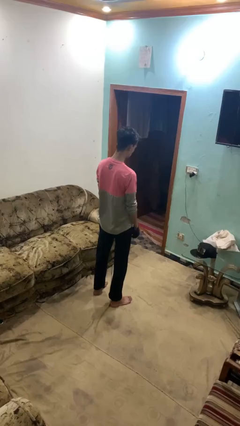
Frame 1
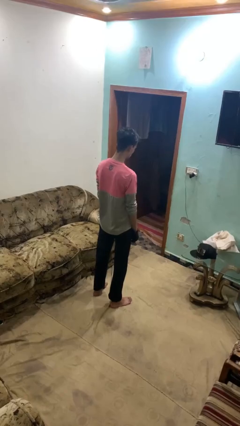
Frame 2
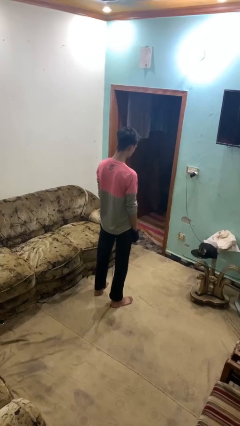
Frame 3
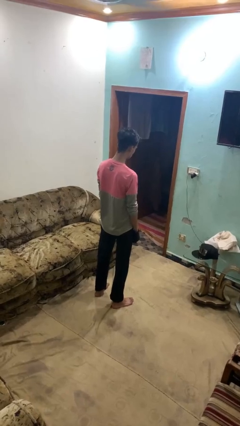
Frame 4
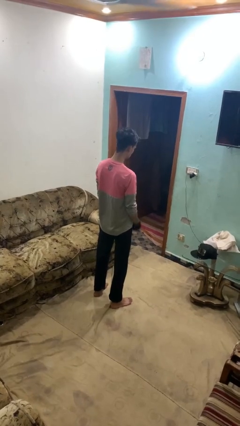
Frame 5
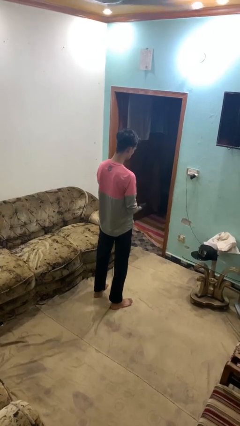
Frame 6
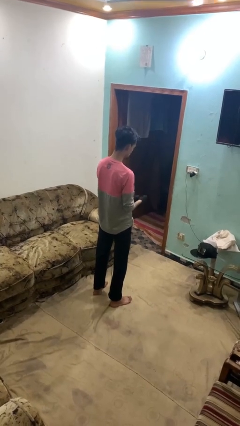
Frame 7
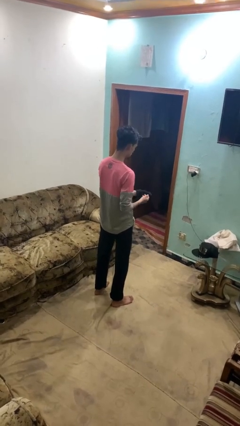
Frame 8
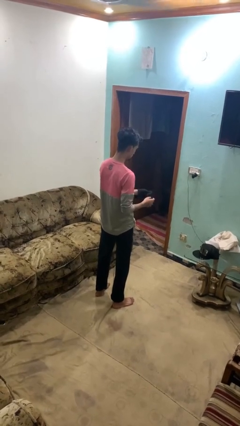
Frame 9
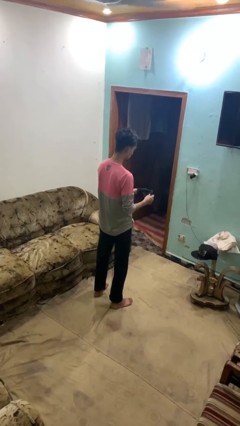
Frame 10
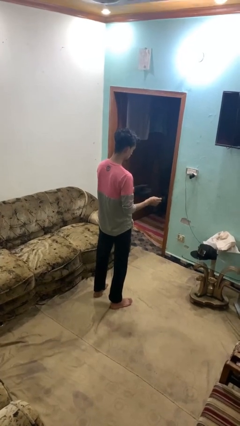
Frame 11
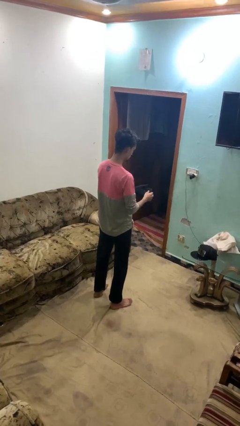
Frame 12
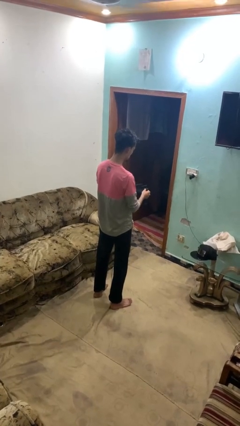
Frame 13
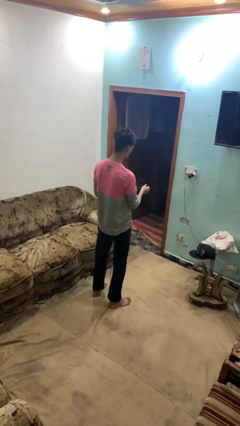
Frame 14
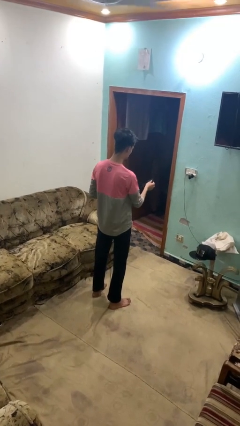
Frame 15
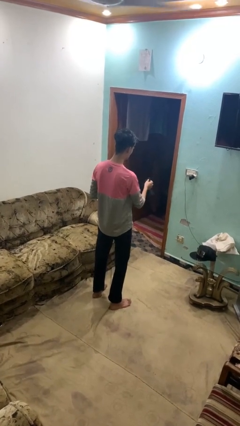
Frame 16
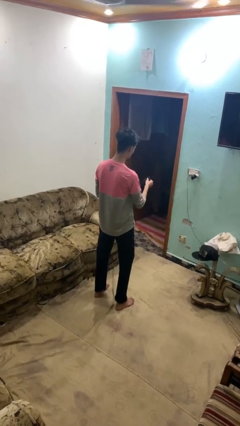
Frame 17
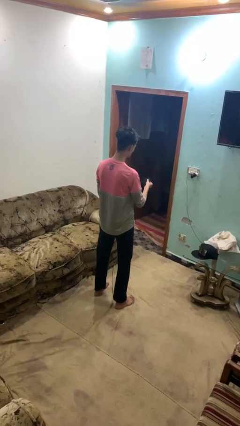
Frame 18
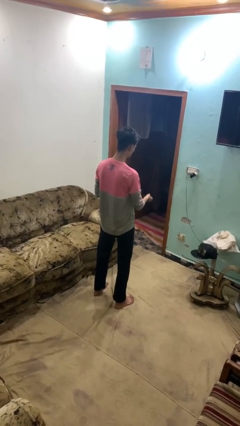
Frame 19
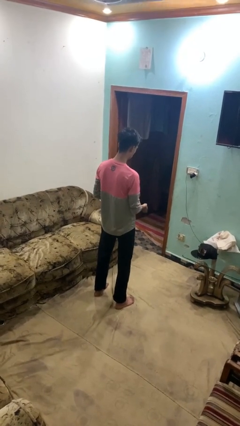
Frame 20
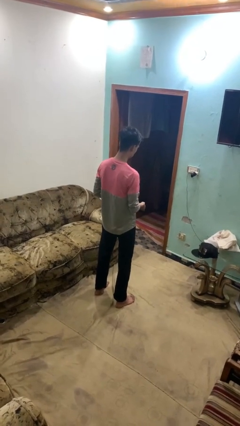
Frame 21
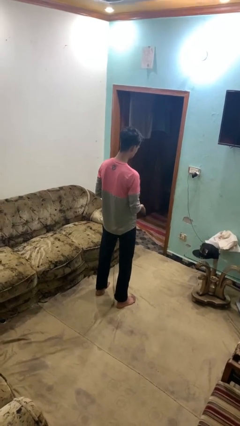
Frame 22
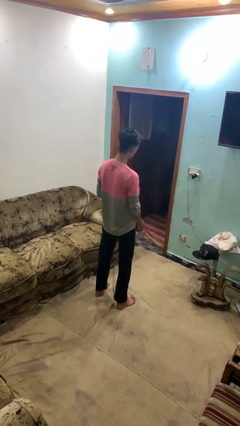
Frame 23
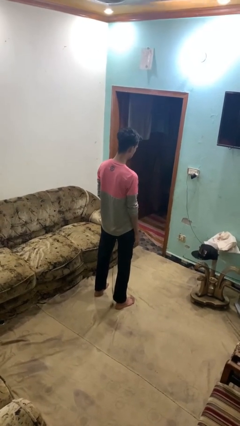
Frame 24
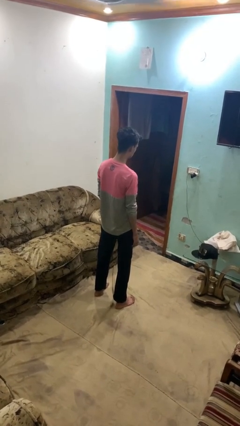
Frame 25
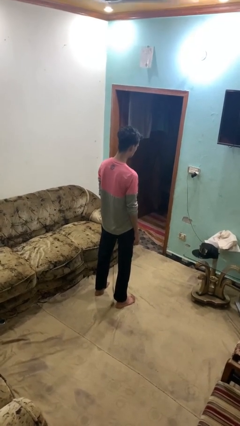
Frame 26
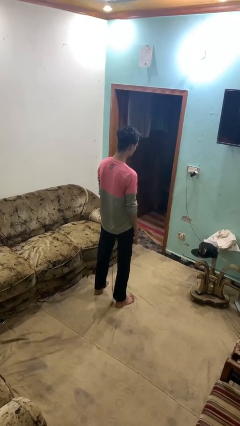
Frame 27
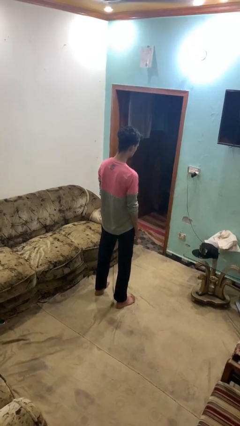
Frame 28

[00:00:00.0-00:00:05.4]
person takes off gloves

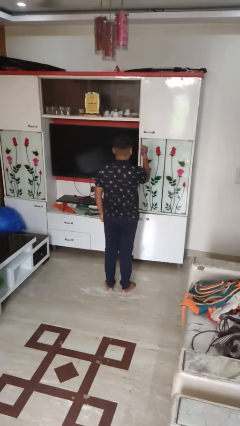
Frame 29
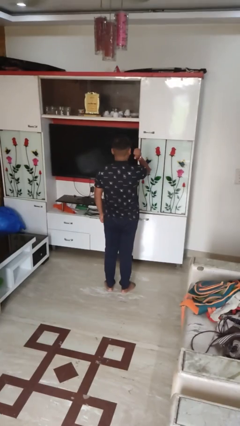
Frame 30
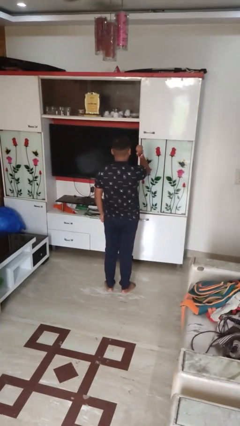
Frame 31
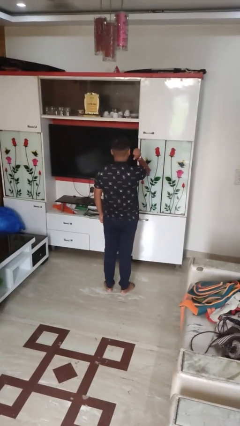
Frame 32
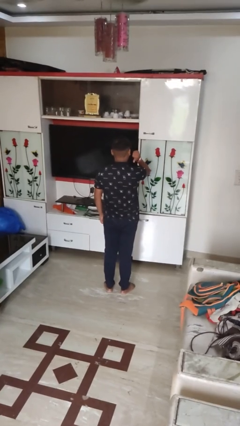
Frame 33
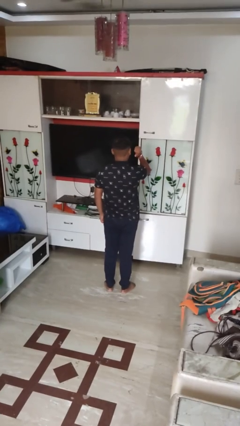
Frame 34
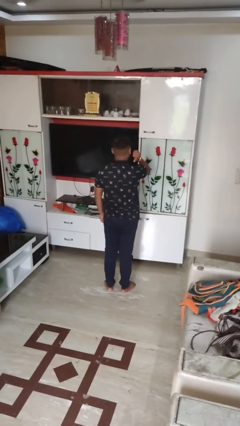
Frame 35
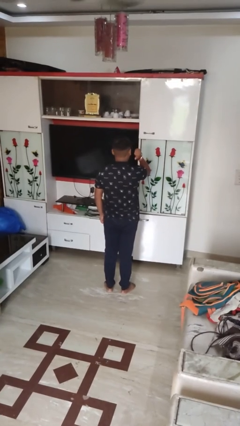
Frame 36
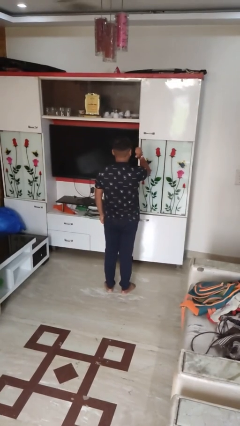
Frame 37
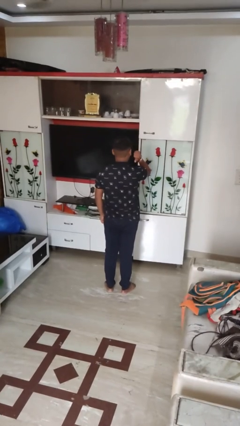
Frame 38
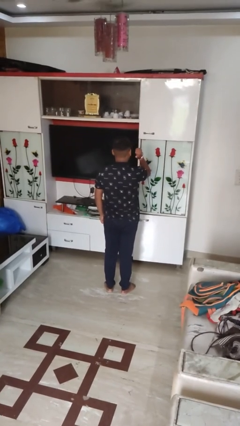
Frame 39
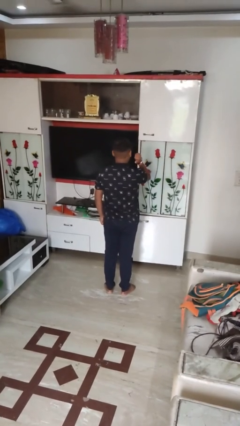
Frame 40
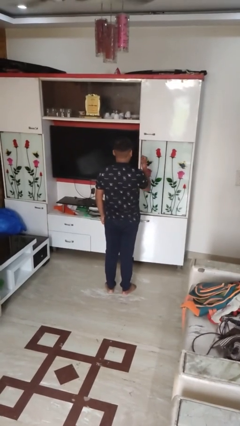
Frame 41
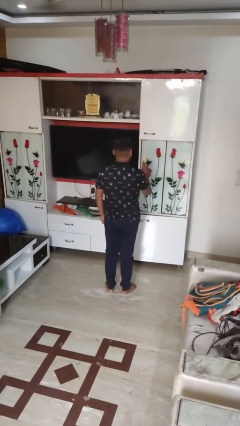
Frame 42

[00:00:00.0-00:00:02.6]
person gestures behind me

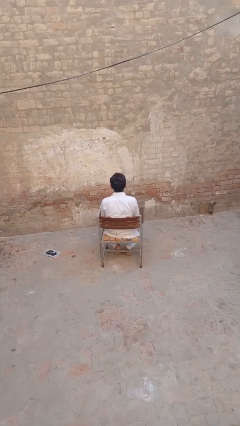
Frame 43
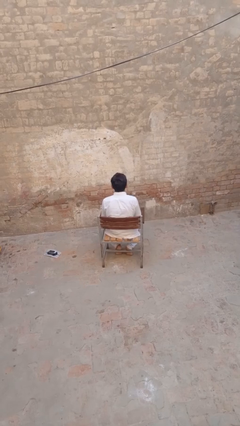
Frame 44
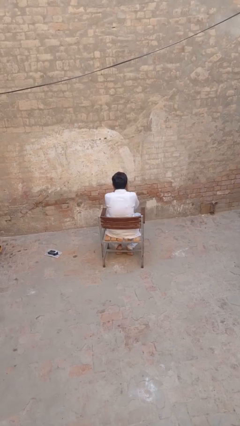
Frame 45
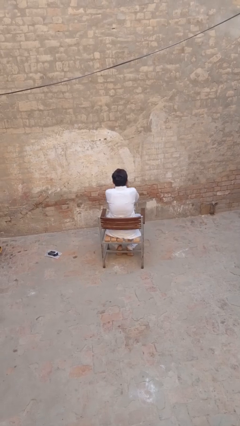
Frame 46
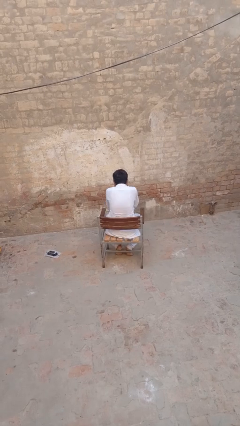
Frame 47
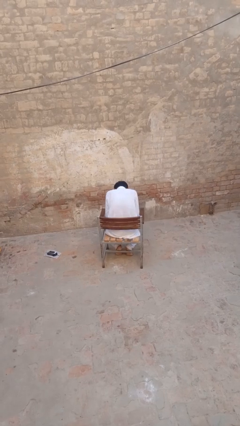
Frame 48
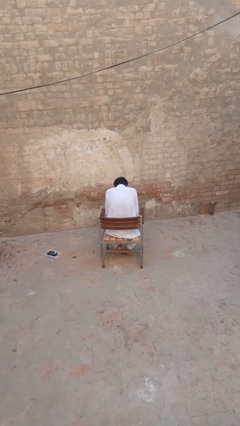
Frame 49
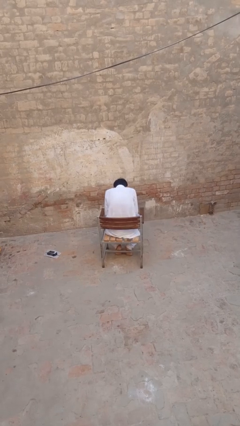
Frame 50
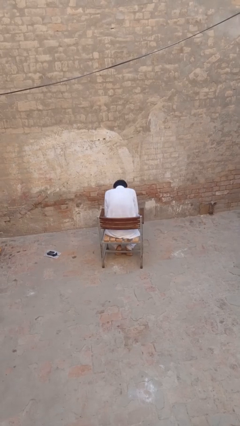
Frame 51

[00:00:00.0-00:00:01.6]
person sneezes into hand

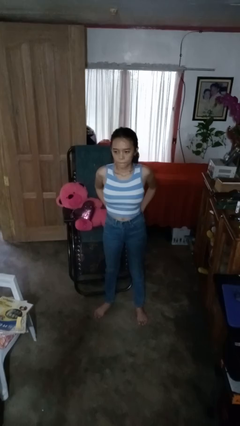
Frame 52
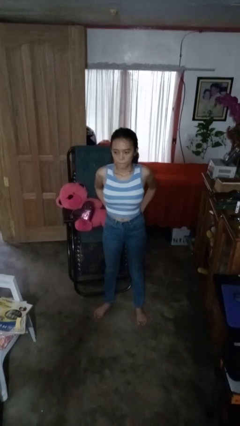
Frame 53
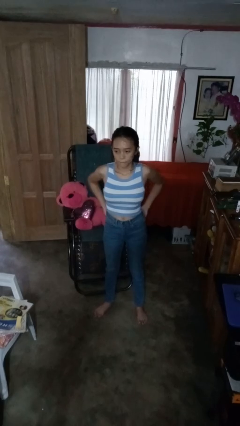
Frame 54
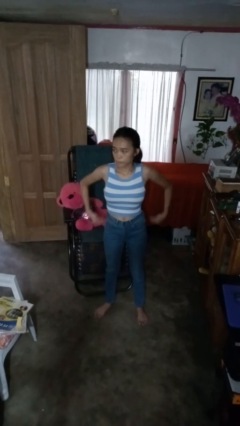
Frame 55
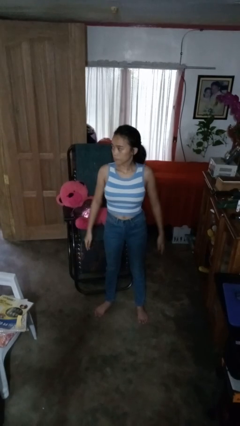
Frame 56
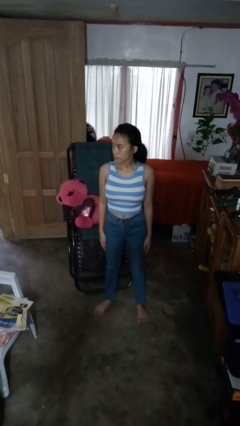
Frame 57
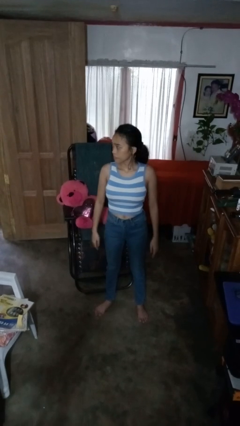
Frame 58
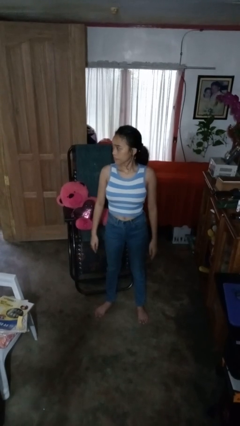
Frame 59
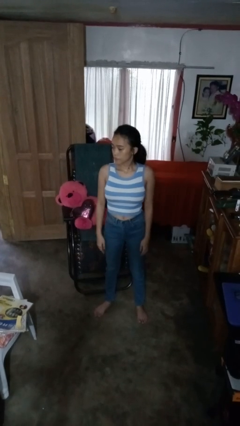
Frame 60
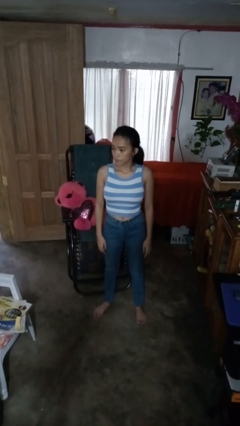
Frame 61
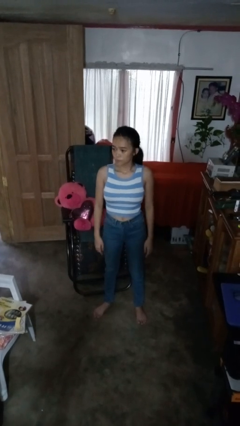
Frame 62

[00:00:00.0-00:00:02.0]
person puts hands in back pockets

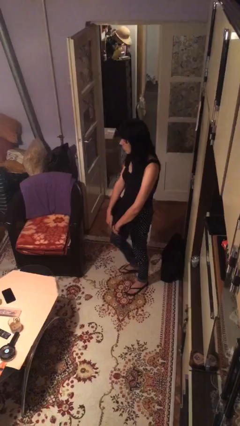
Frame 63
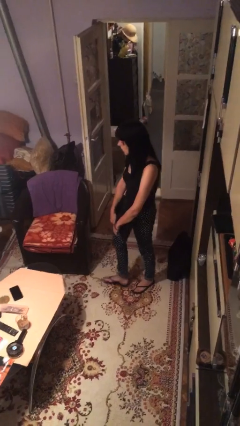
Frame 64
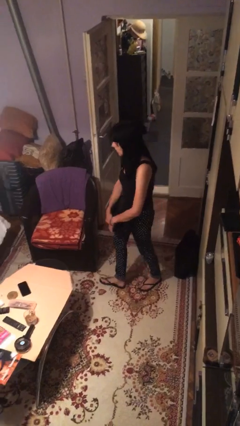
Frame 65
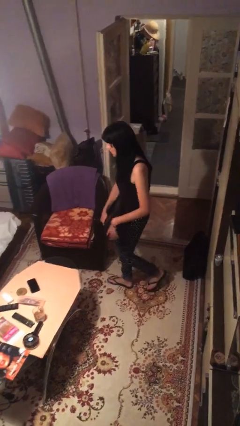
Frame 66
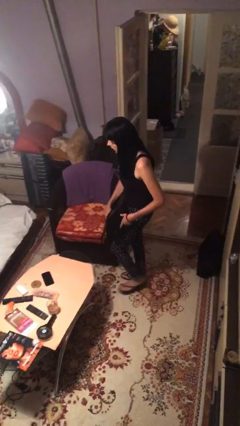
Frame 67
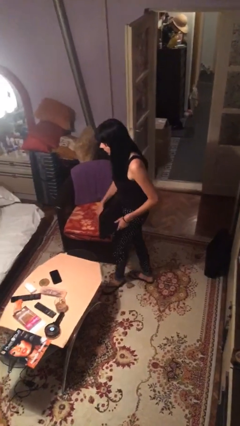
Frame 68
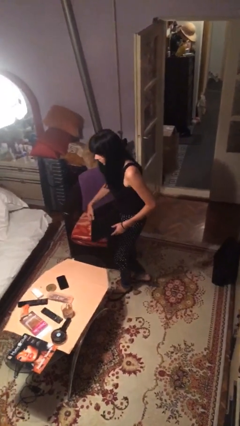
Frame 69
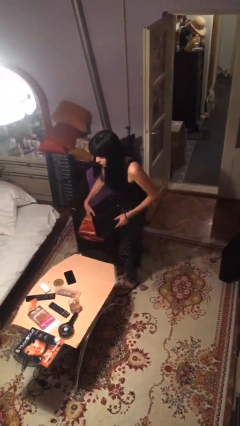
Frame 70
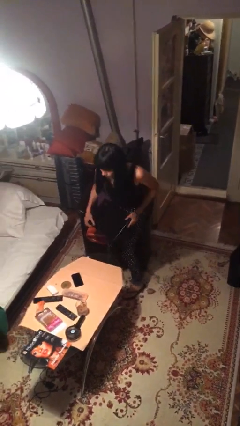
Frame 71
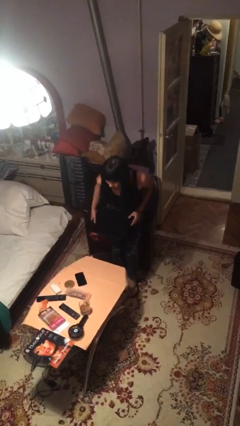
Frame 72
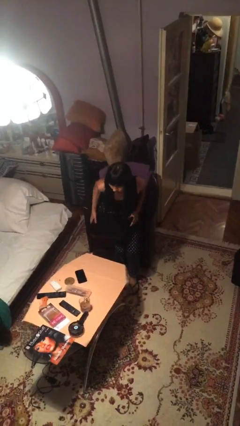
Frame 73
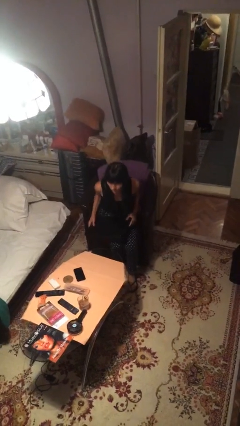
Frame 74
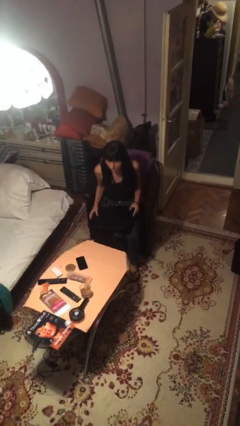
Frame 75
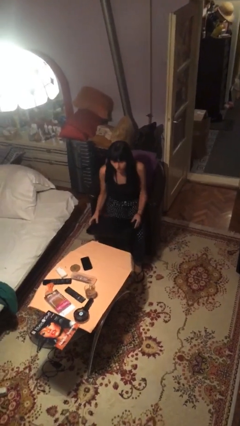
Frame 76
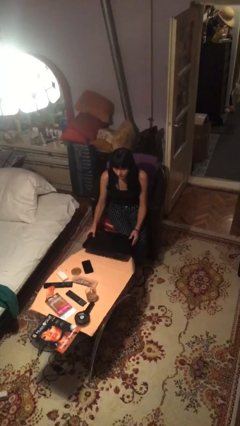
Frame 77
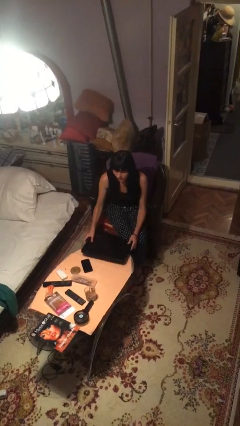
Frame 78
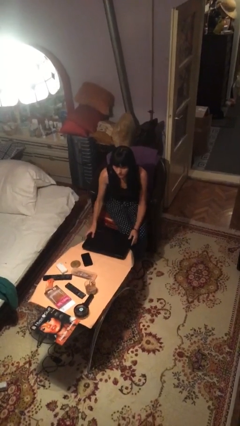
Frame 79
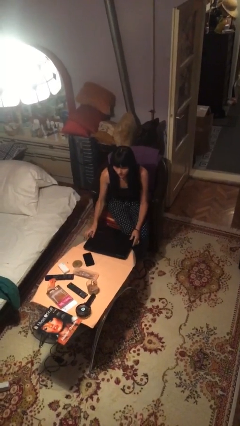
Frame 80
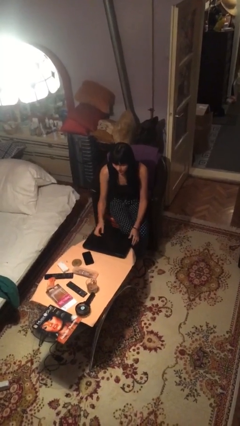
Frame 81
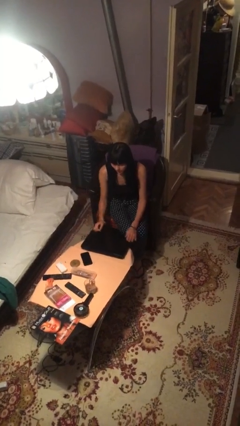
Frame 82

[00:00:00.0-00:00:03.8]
person sits down

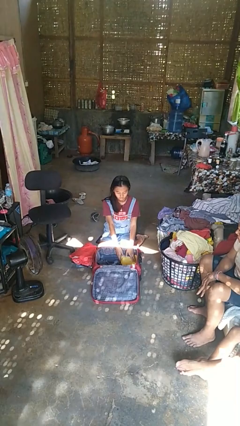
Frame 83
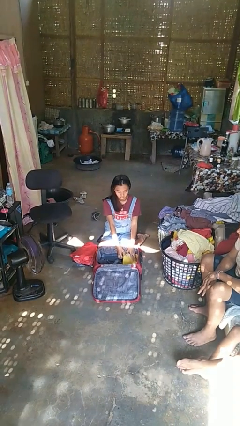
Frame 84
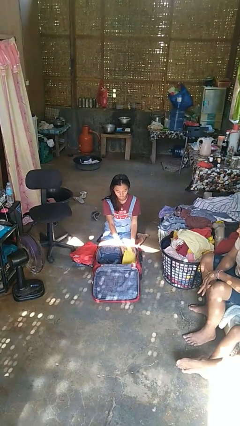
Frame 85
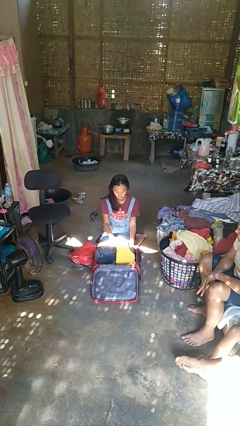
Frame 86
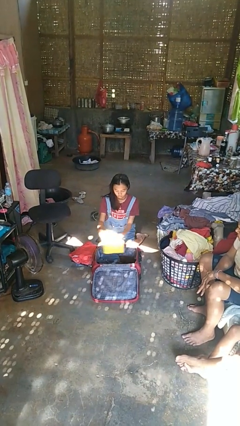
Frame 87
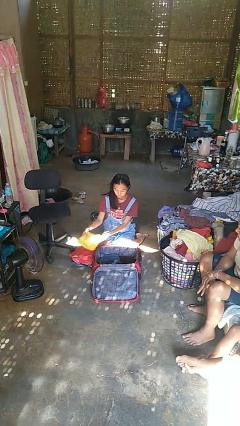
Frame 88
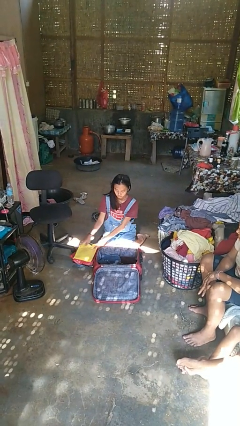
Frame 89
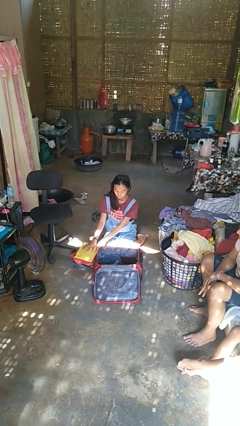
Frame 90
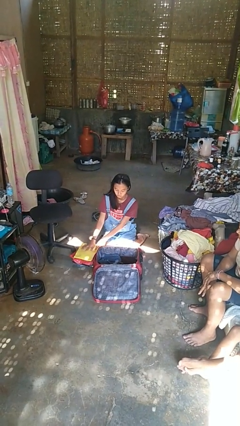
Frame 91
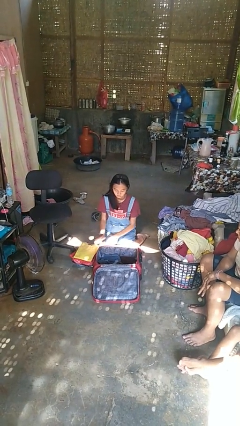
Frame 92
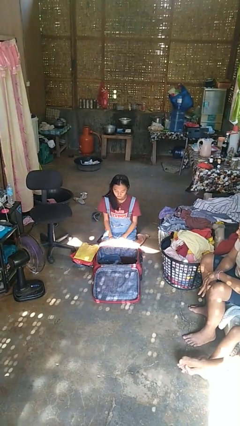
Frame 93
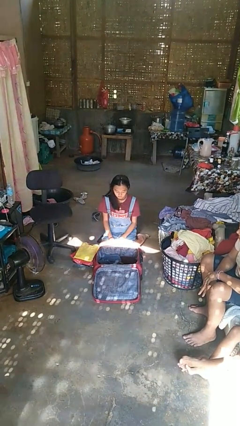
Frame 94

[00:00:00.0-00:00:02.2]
person unloads clothes from suitcase

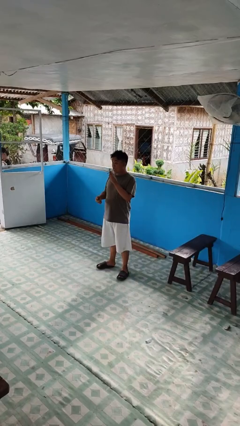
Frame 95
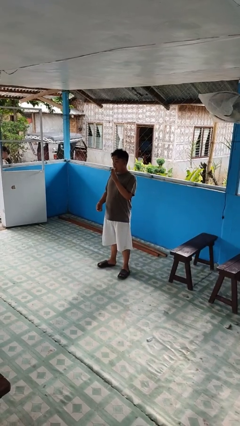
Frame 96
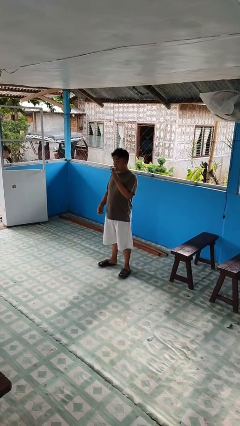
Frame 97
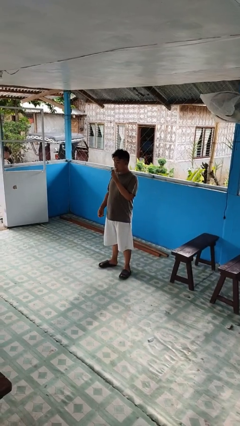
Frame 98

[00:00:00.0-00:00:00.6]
person eats banana
